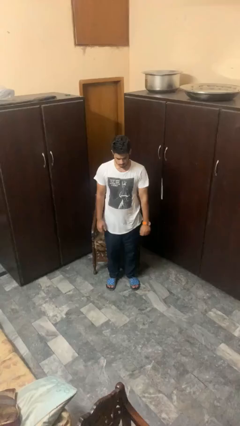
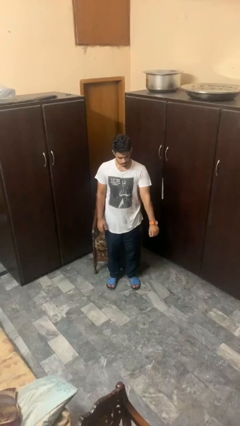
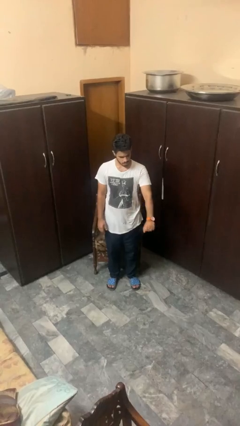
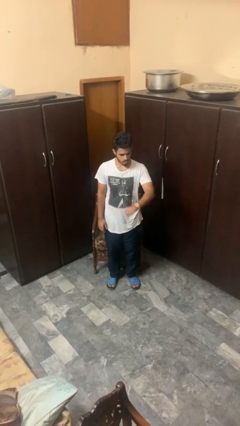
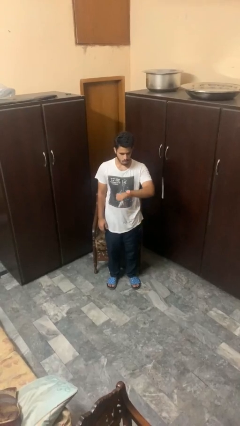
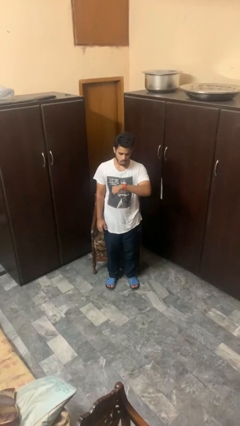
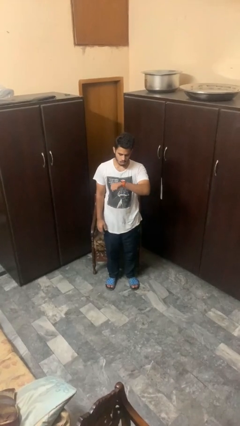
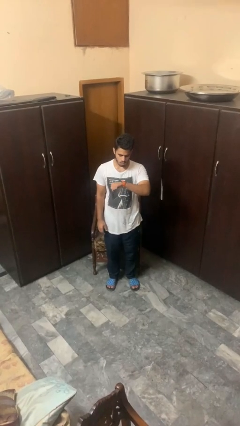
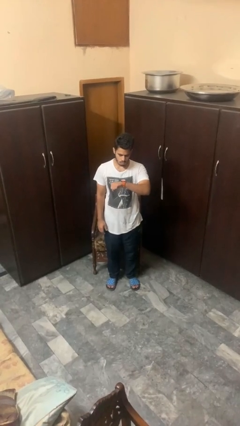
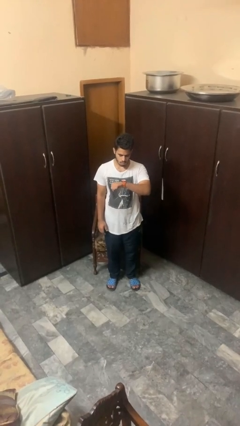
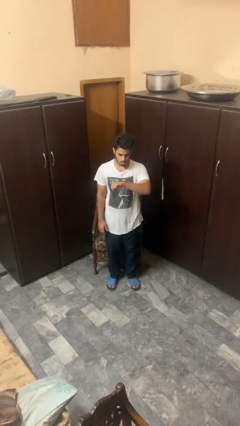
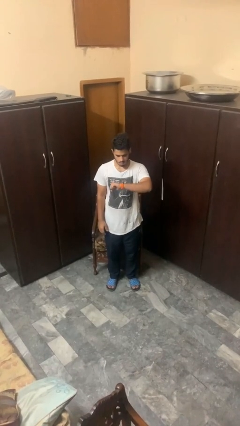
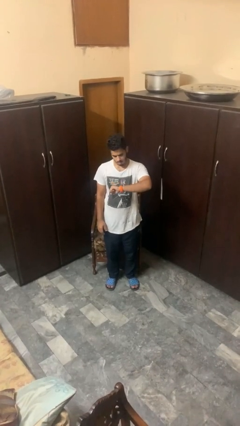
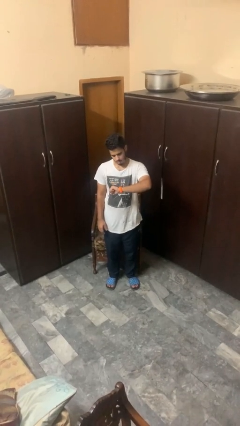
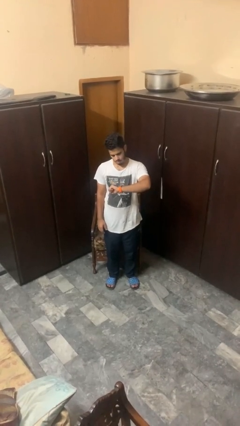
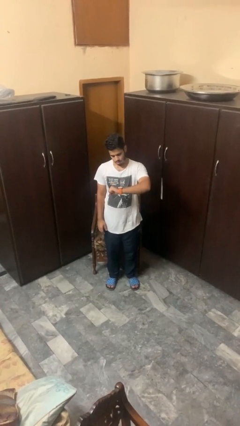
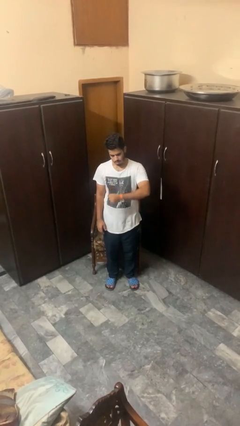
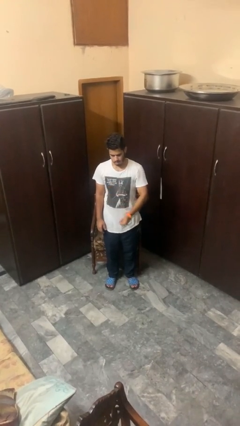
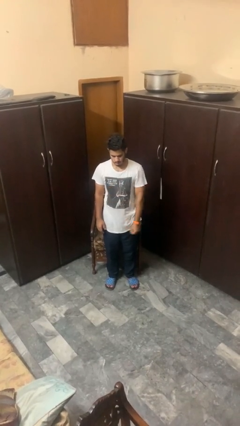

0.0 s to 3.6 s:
person looks at wristwatch

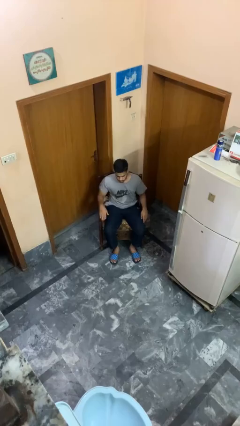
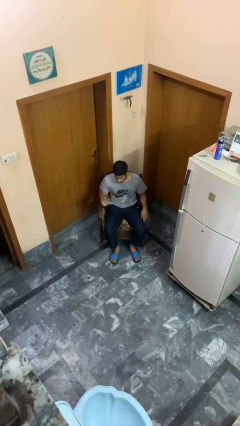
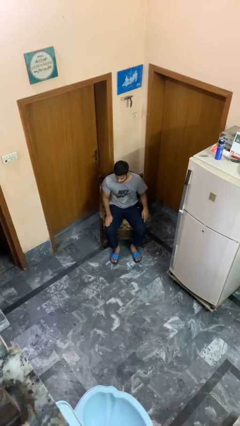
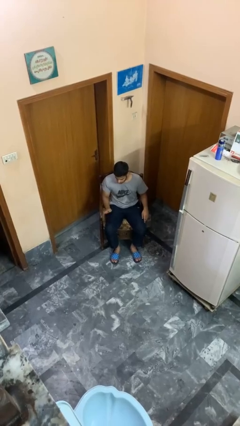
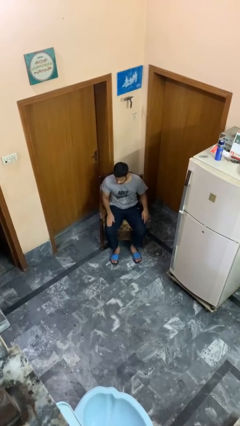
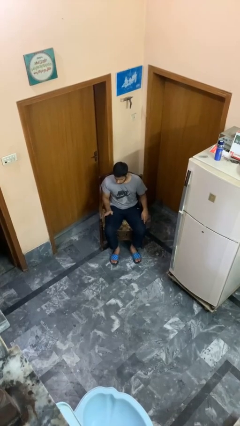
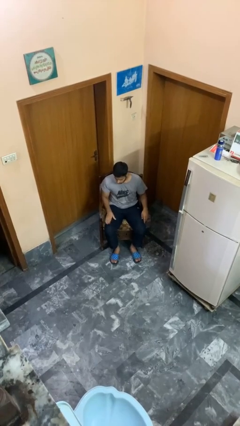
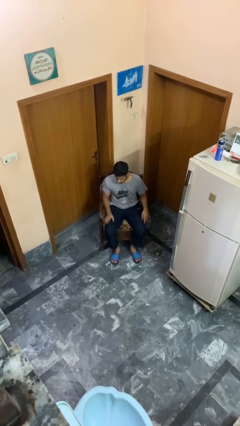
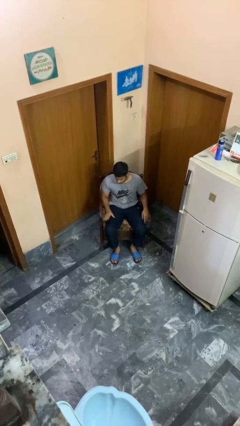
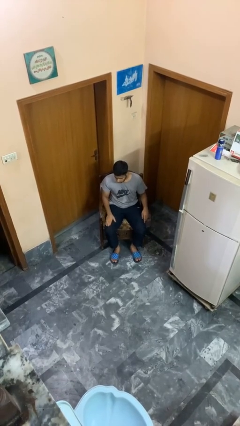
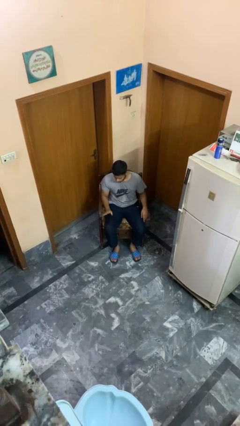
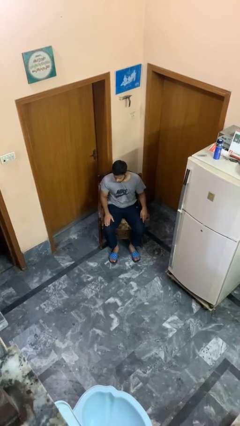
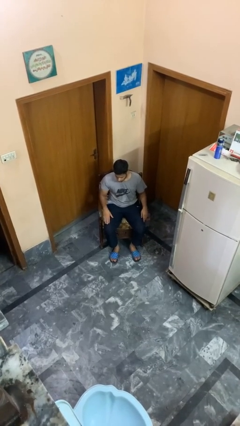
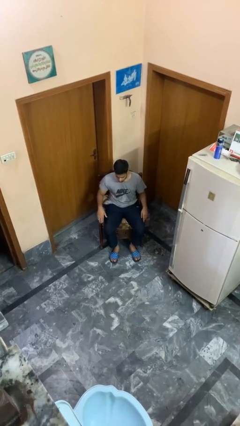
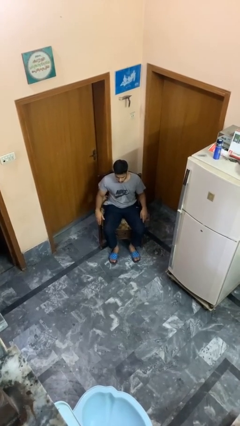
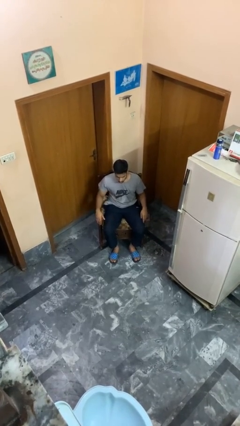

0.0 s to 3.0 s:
person slaps hands on thighs

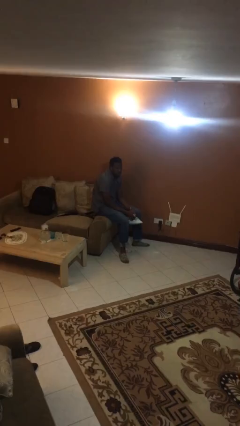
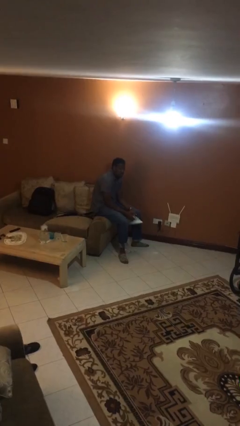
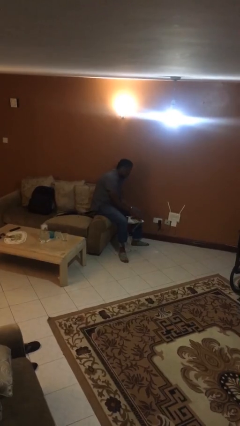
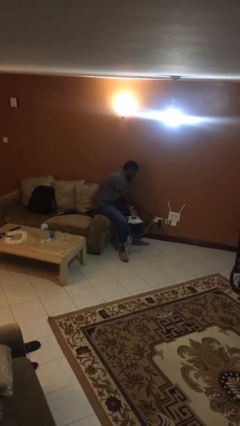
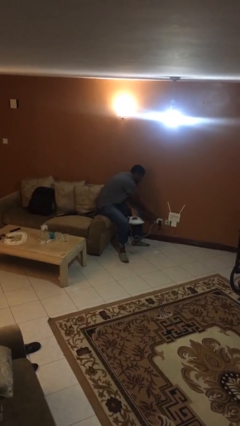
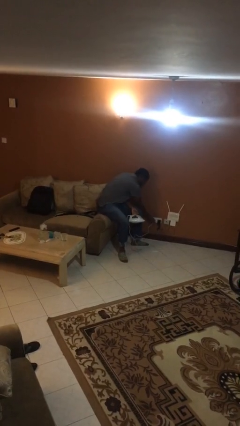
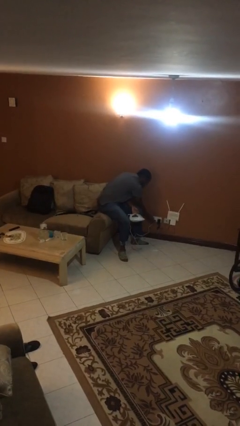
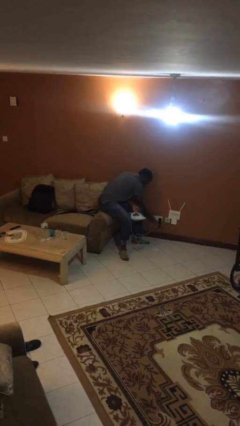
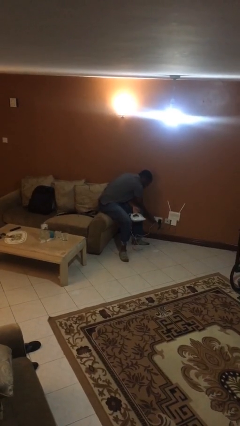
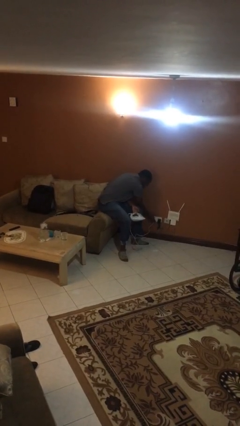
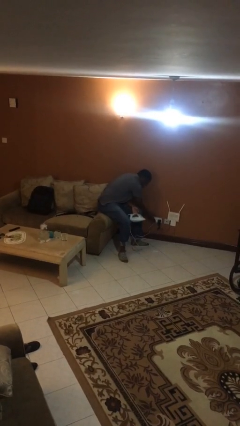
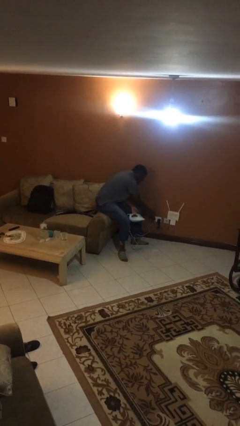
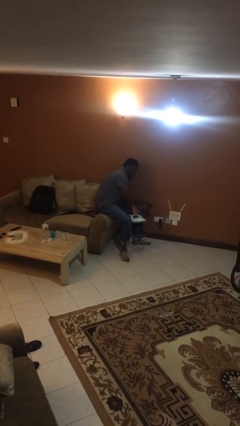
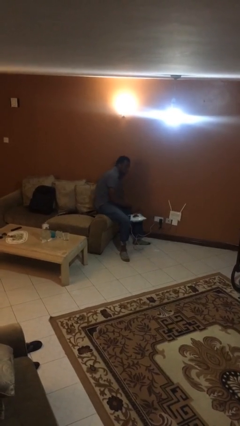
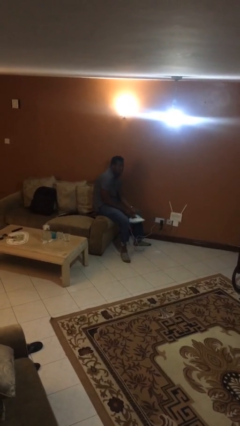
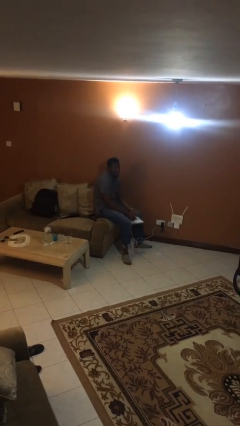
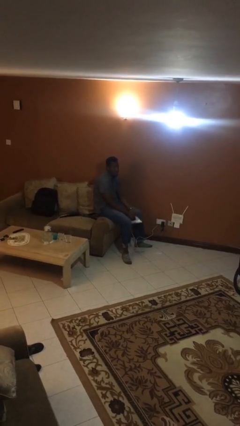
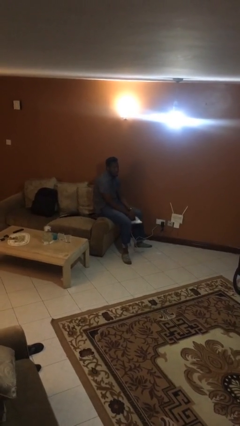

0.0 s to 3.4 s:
person plugs into electrical socket

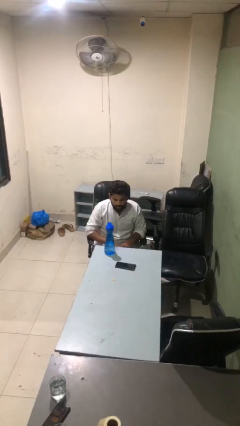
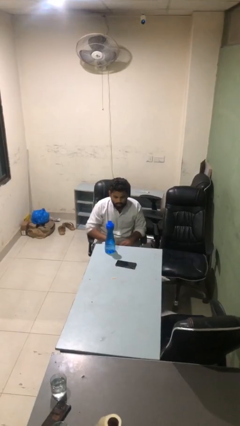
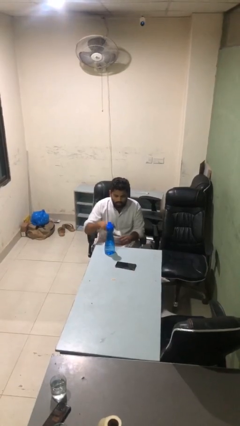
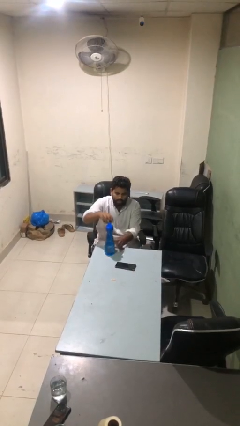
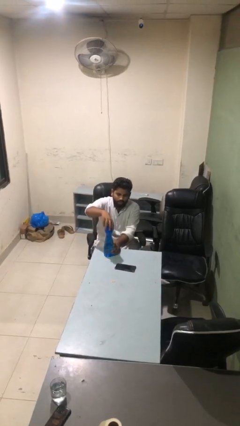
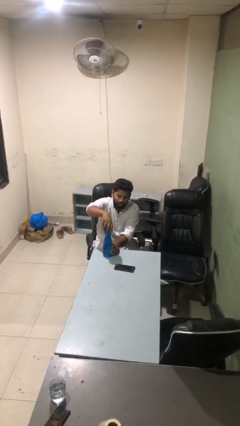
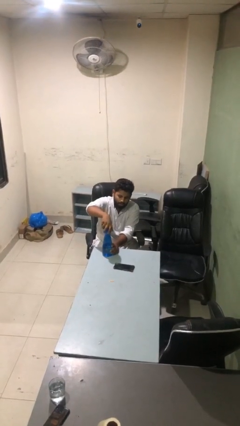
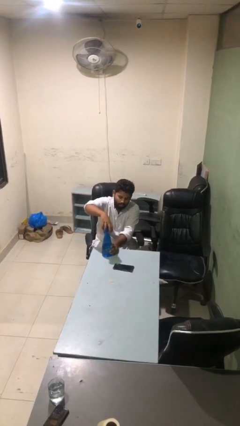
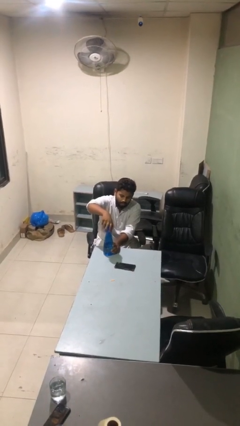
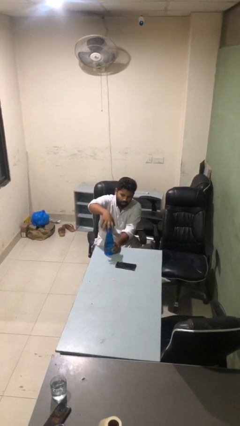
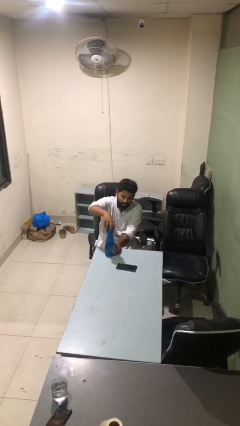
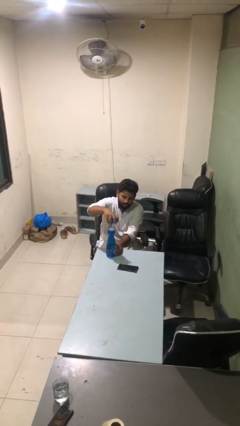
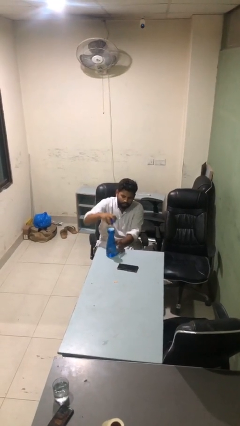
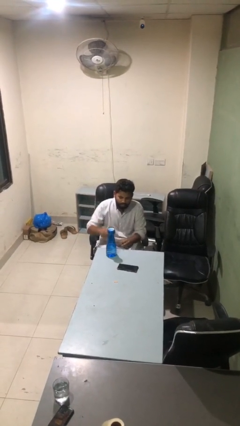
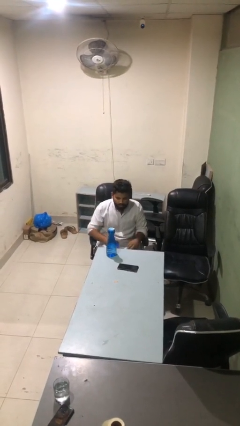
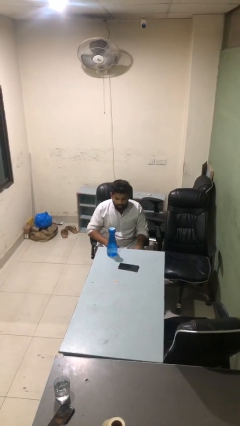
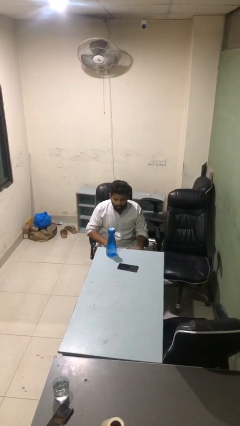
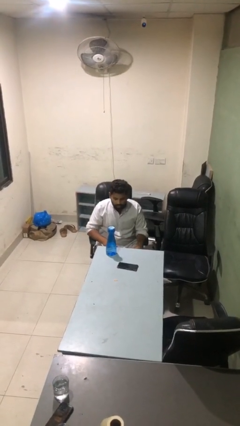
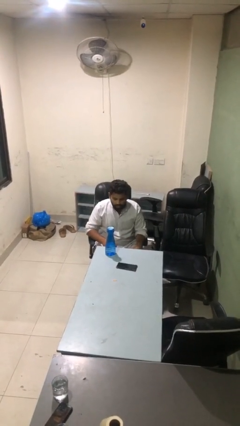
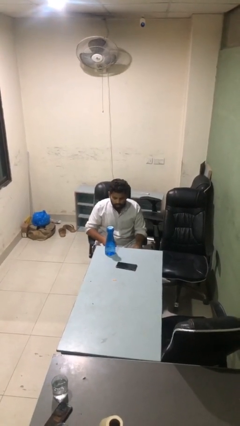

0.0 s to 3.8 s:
person unscrews lid from bottle

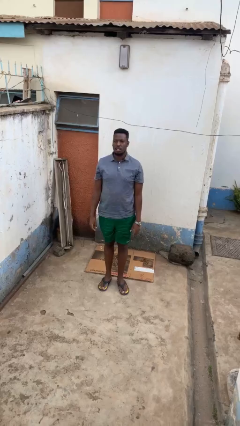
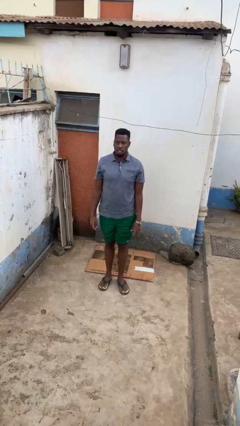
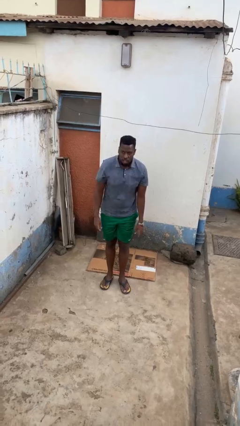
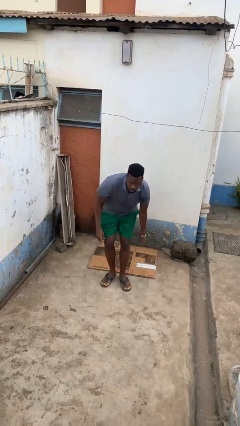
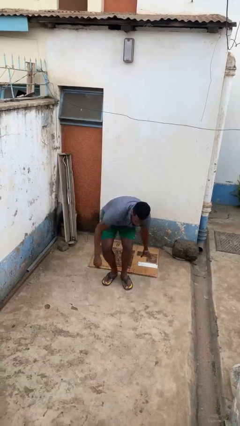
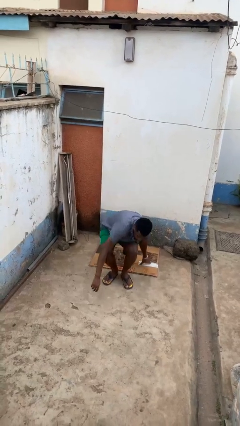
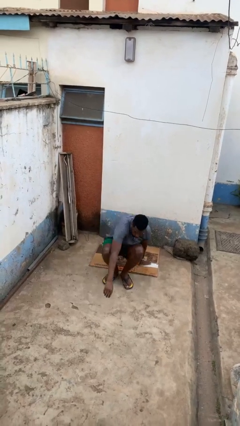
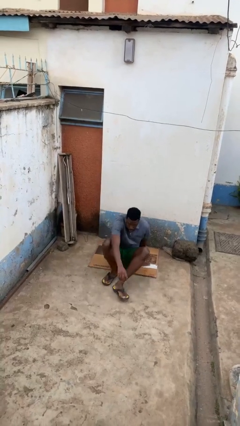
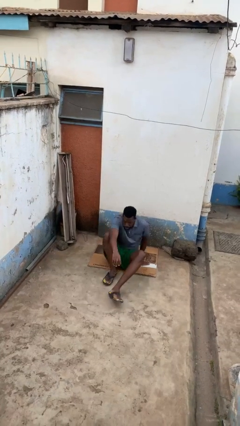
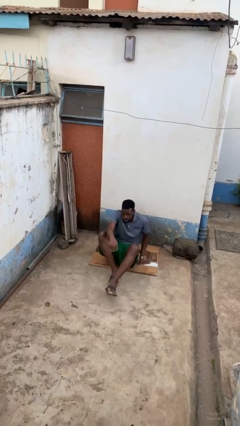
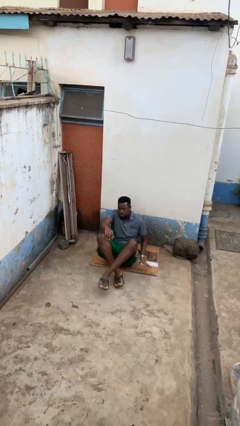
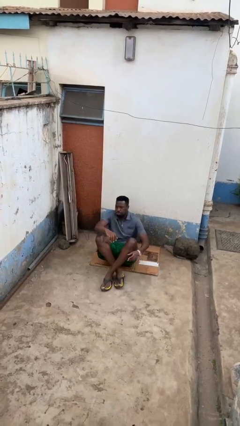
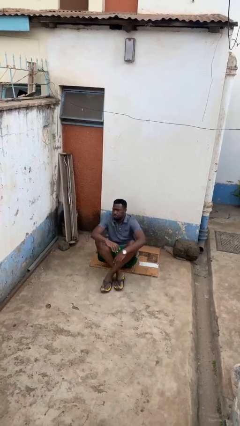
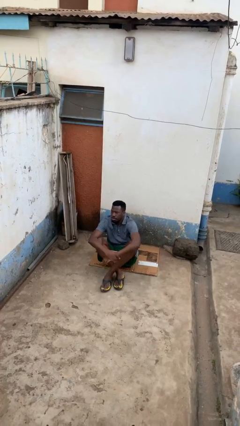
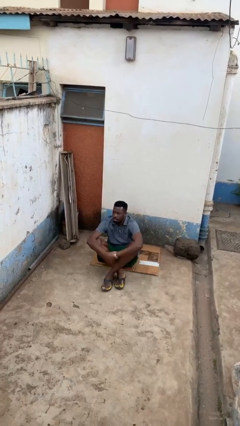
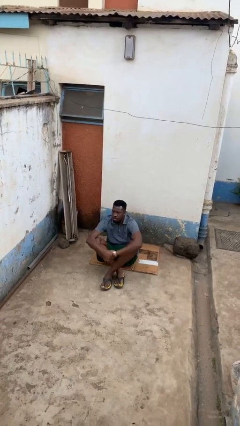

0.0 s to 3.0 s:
person sits crisscross
